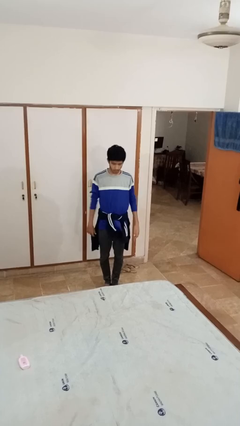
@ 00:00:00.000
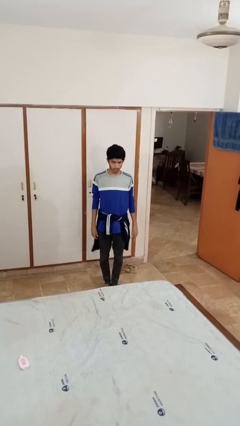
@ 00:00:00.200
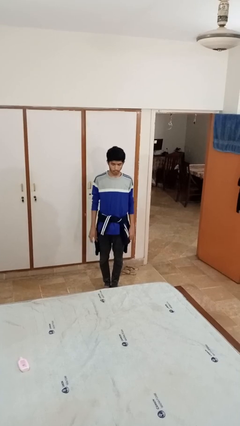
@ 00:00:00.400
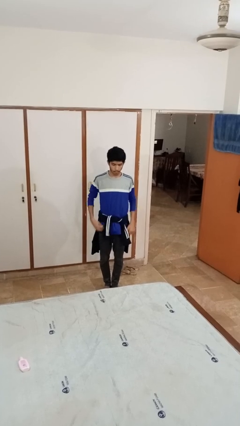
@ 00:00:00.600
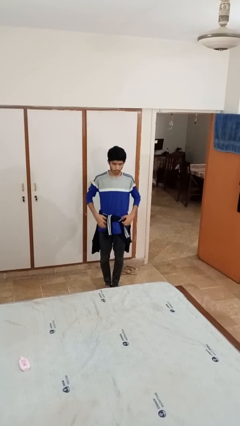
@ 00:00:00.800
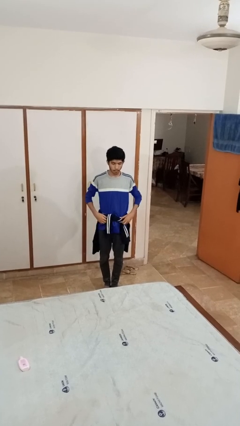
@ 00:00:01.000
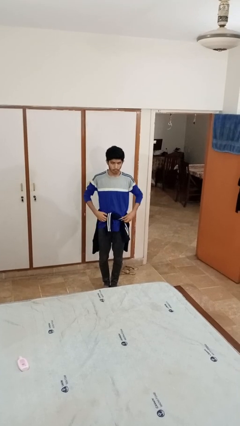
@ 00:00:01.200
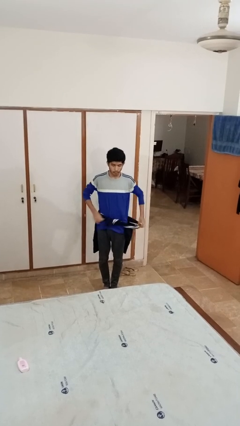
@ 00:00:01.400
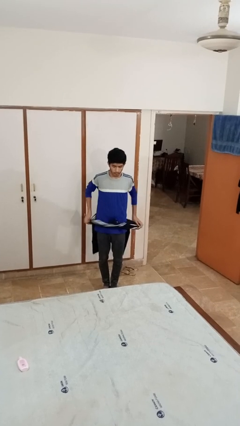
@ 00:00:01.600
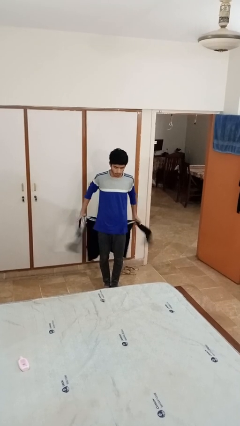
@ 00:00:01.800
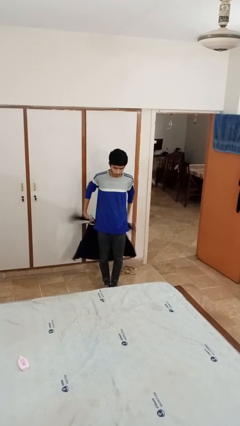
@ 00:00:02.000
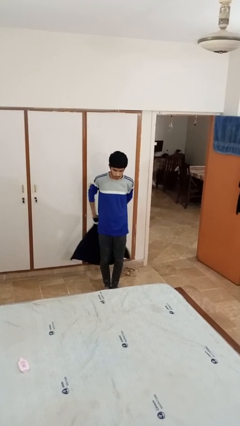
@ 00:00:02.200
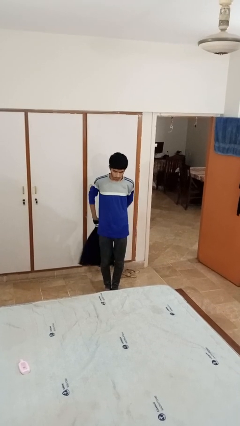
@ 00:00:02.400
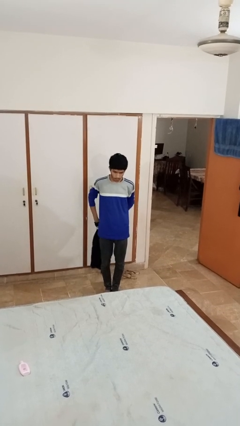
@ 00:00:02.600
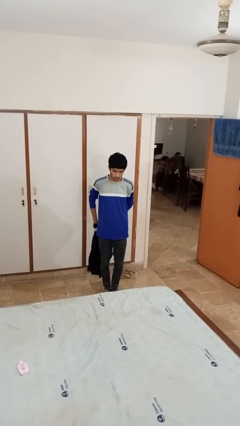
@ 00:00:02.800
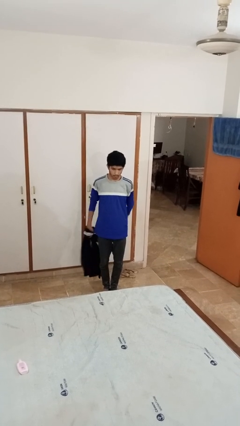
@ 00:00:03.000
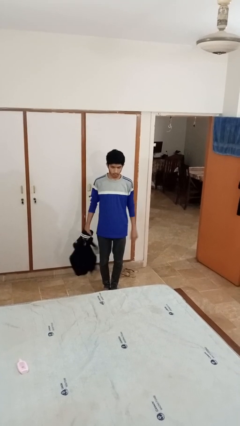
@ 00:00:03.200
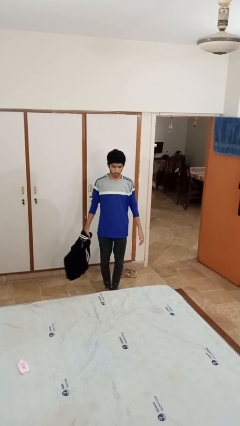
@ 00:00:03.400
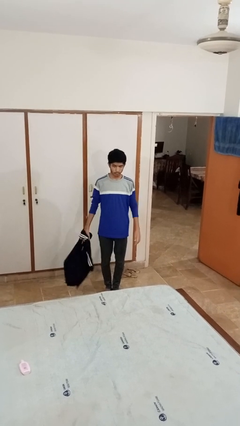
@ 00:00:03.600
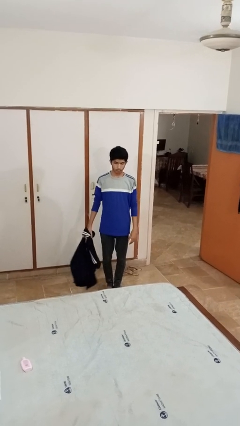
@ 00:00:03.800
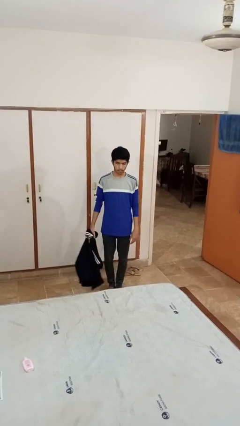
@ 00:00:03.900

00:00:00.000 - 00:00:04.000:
person unties jacket around waist

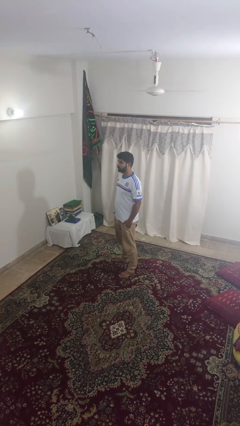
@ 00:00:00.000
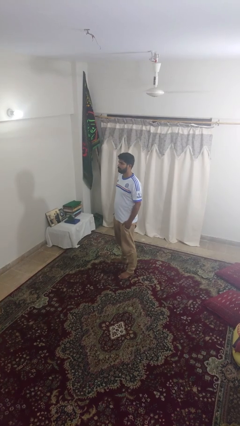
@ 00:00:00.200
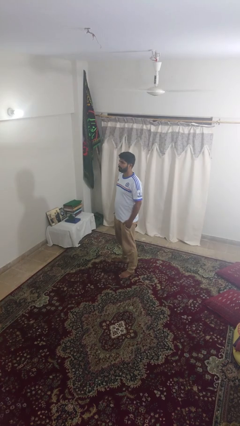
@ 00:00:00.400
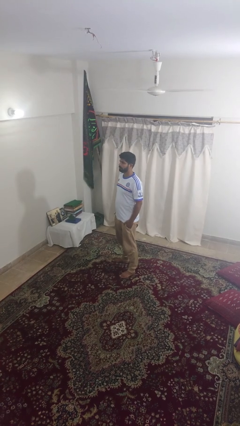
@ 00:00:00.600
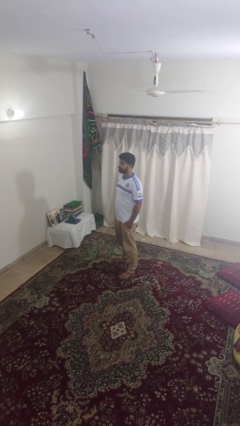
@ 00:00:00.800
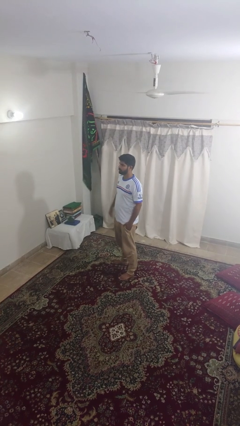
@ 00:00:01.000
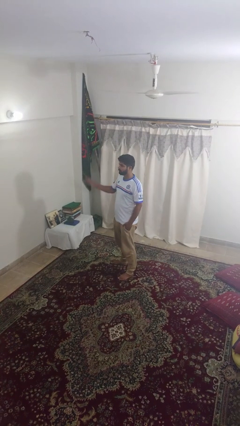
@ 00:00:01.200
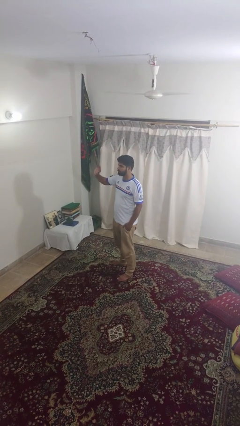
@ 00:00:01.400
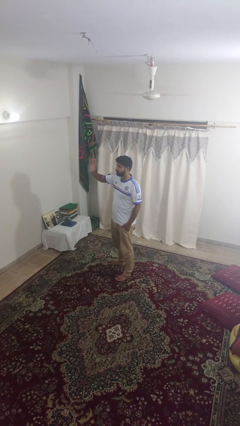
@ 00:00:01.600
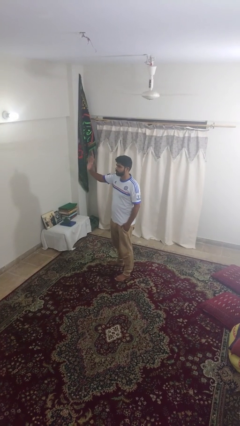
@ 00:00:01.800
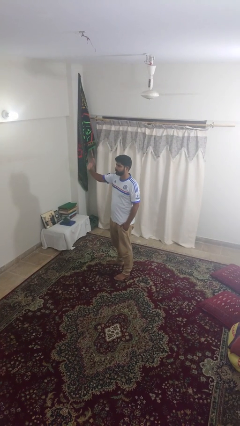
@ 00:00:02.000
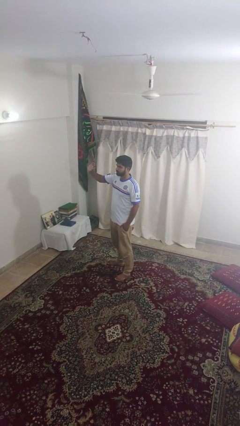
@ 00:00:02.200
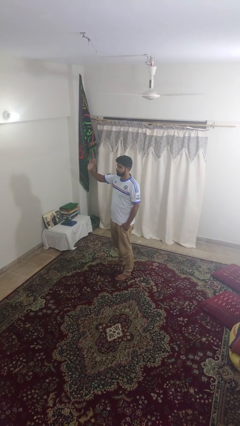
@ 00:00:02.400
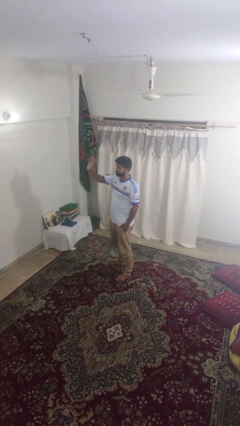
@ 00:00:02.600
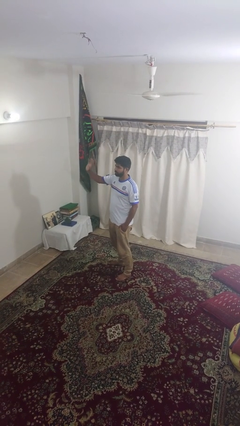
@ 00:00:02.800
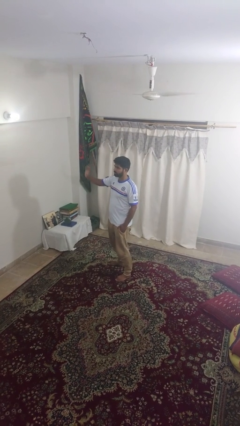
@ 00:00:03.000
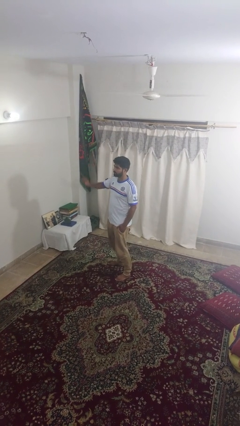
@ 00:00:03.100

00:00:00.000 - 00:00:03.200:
person waves at person

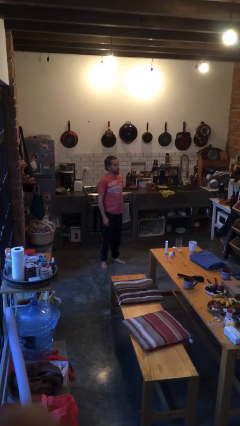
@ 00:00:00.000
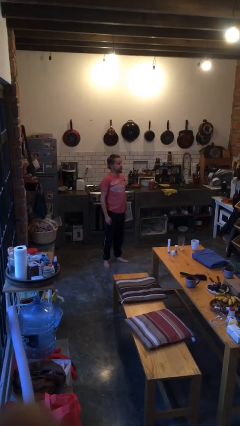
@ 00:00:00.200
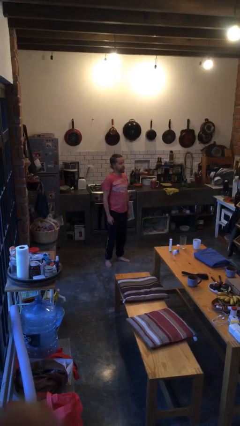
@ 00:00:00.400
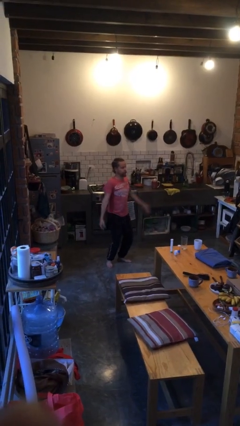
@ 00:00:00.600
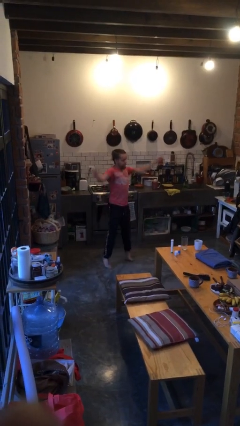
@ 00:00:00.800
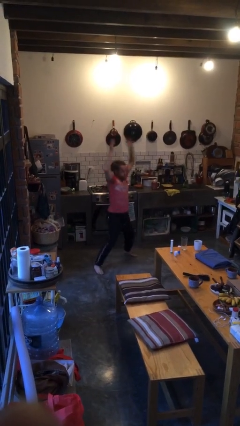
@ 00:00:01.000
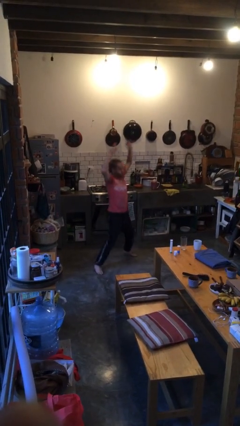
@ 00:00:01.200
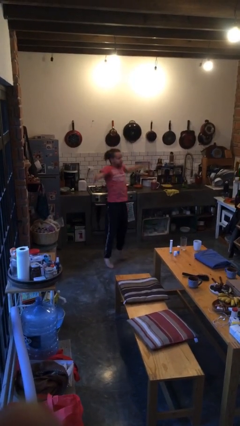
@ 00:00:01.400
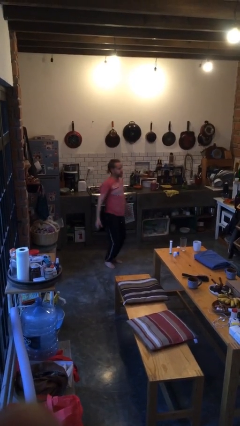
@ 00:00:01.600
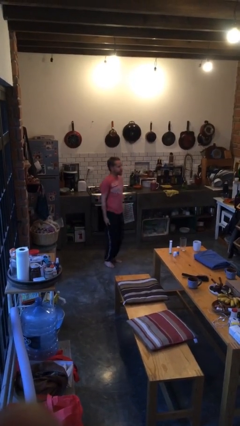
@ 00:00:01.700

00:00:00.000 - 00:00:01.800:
person exercises with jumping jacks

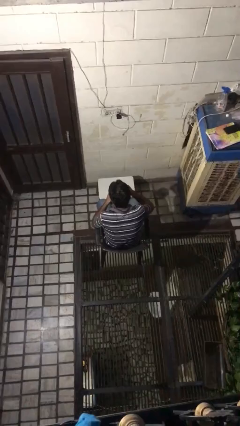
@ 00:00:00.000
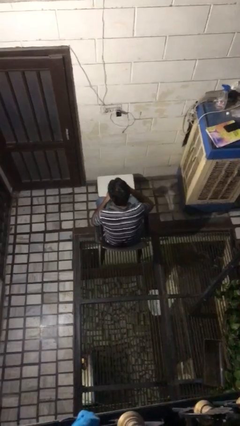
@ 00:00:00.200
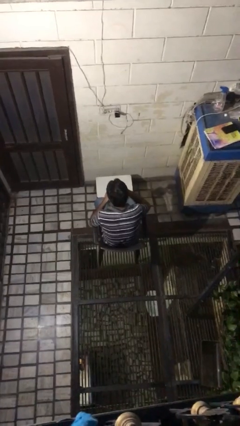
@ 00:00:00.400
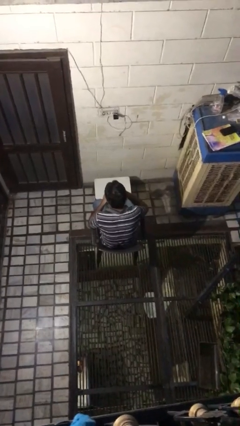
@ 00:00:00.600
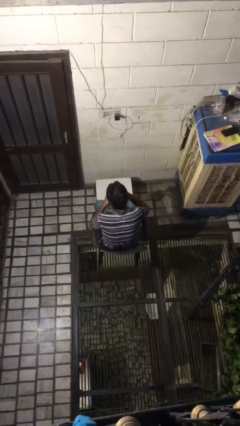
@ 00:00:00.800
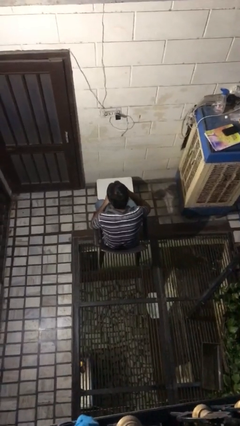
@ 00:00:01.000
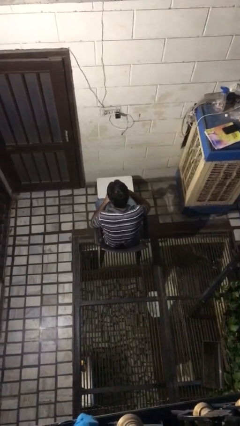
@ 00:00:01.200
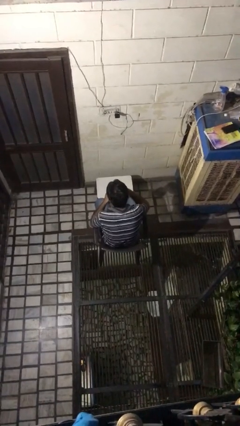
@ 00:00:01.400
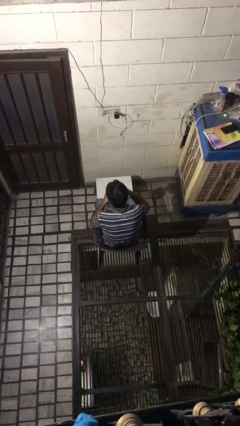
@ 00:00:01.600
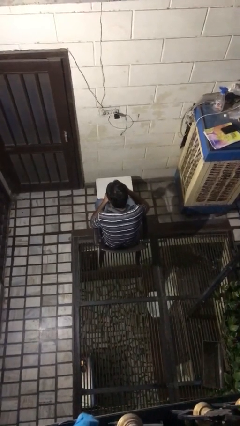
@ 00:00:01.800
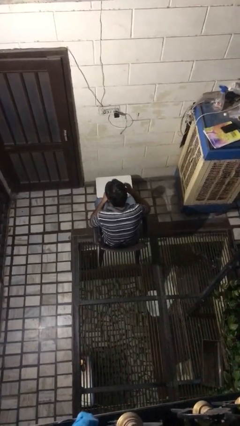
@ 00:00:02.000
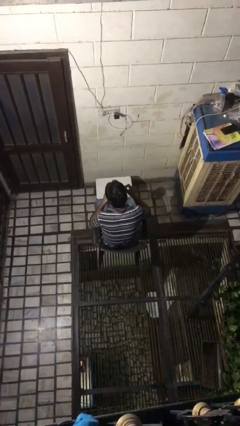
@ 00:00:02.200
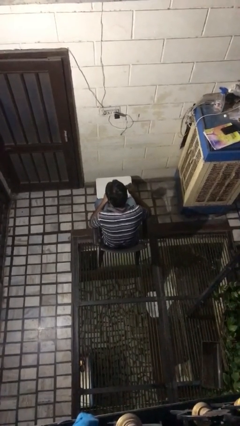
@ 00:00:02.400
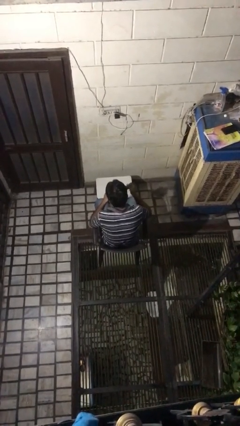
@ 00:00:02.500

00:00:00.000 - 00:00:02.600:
person stirs mug

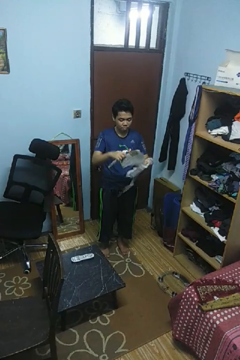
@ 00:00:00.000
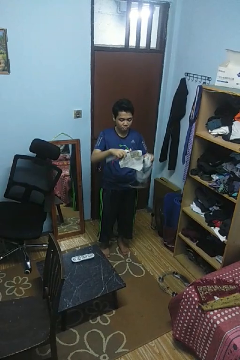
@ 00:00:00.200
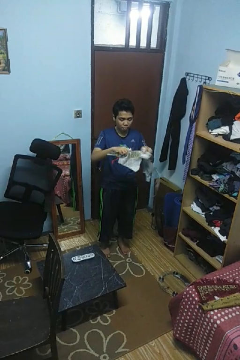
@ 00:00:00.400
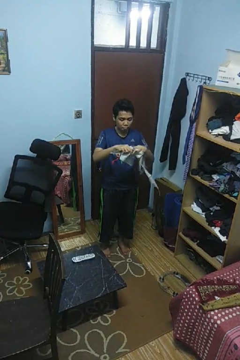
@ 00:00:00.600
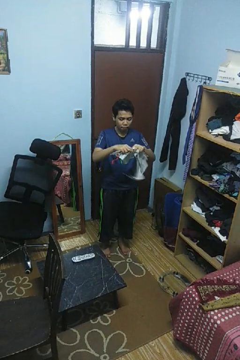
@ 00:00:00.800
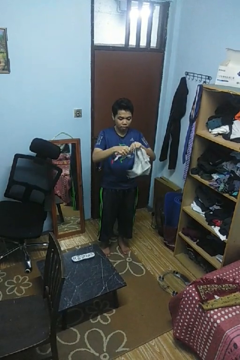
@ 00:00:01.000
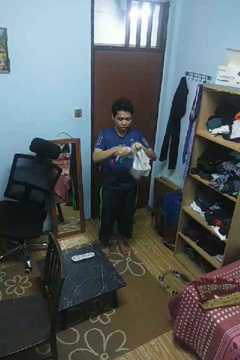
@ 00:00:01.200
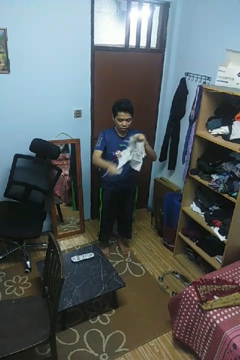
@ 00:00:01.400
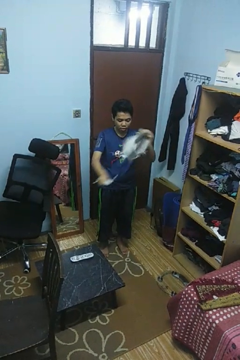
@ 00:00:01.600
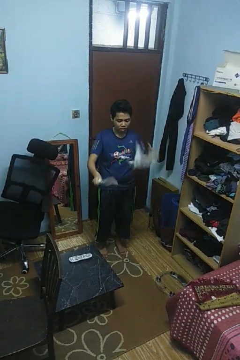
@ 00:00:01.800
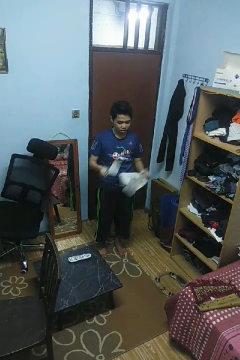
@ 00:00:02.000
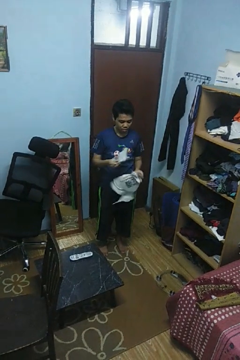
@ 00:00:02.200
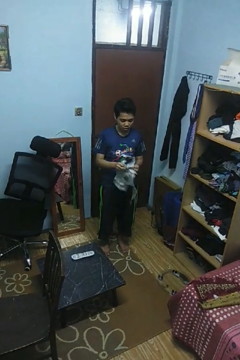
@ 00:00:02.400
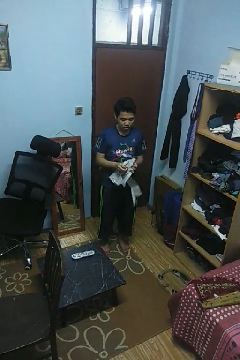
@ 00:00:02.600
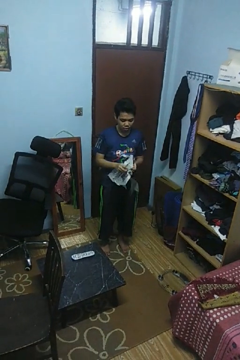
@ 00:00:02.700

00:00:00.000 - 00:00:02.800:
person tears paper

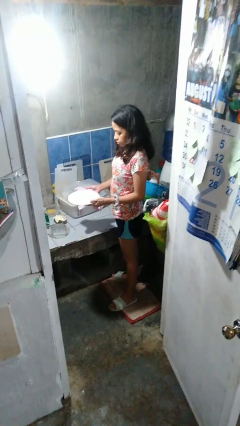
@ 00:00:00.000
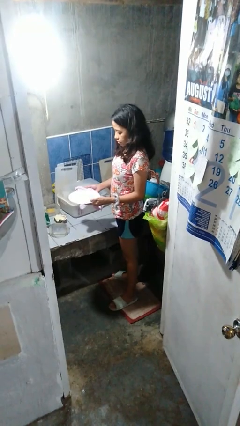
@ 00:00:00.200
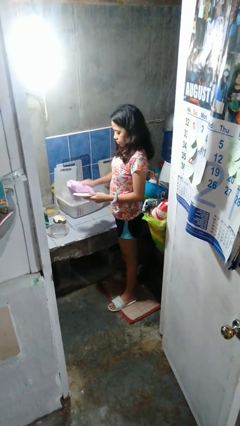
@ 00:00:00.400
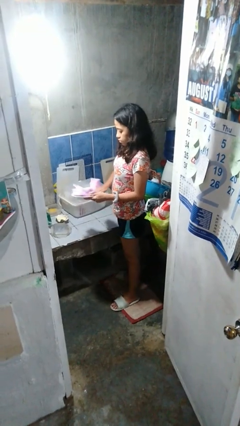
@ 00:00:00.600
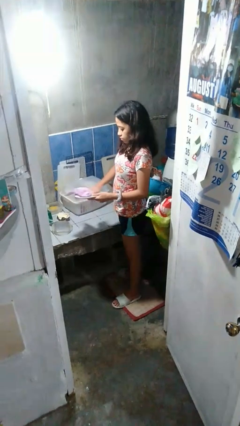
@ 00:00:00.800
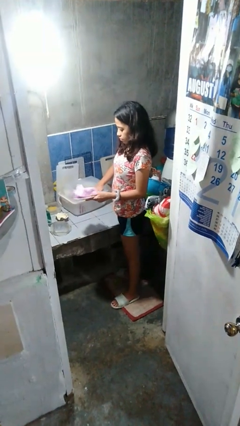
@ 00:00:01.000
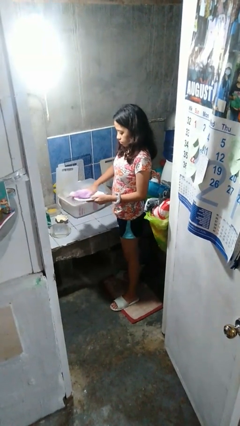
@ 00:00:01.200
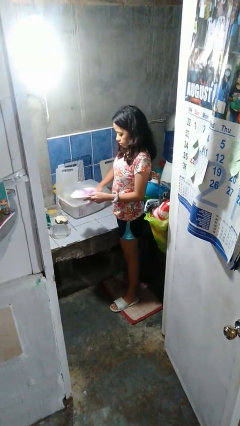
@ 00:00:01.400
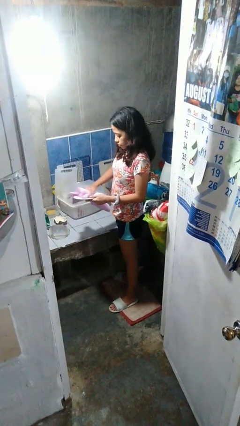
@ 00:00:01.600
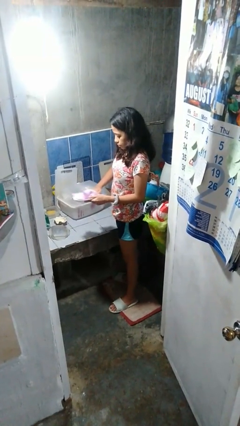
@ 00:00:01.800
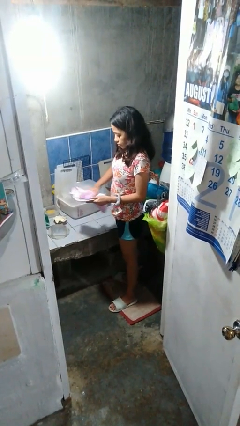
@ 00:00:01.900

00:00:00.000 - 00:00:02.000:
person dries dish

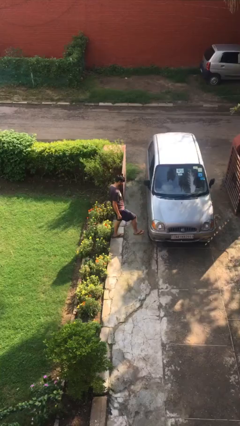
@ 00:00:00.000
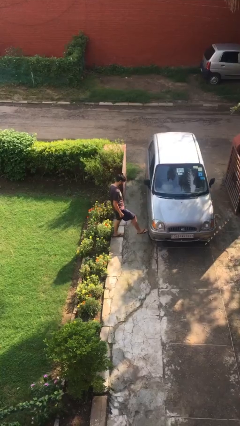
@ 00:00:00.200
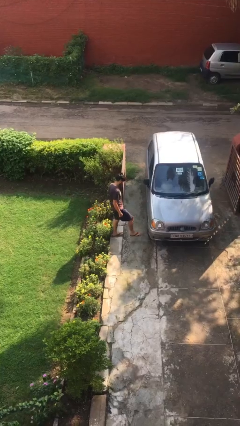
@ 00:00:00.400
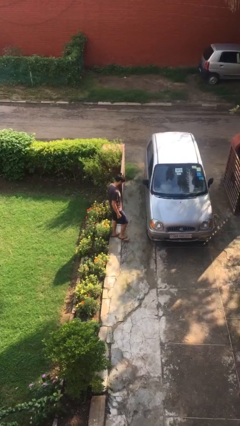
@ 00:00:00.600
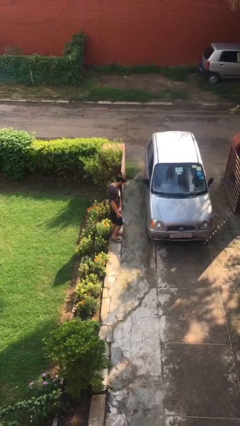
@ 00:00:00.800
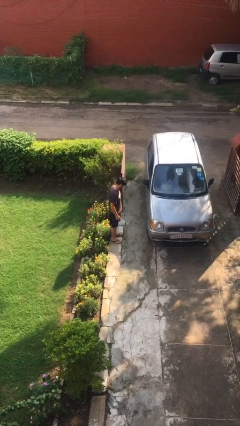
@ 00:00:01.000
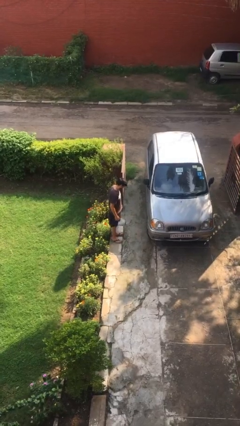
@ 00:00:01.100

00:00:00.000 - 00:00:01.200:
person kicks car tires
